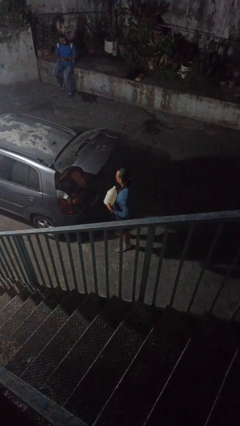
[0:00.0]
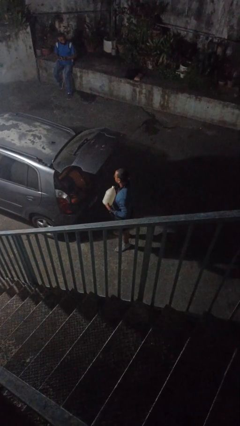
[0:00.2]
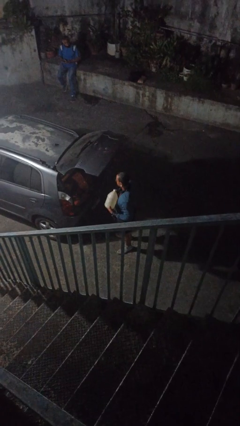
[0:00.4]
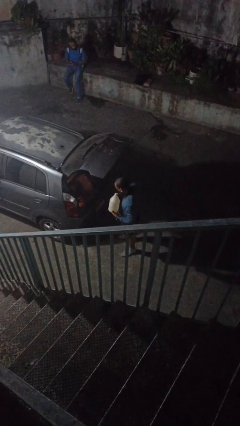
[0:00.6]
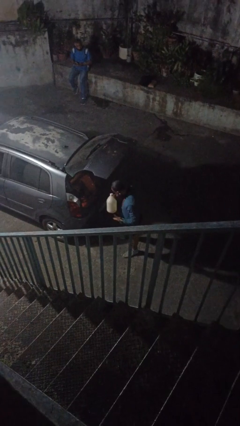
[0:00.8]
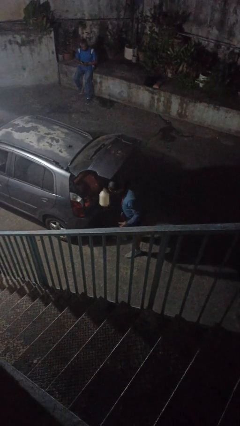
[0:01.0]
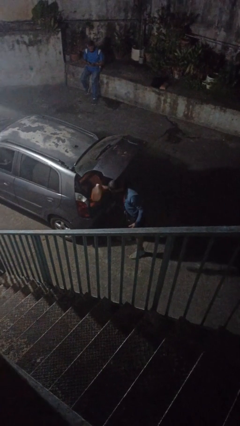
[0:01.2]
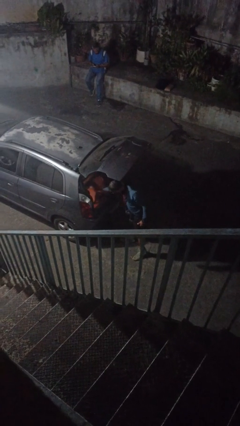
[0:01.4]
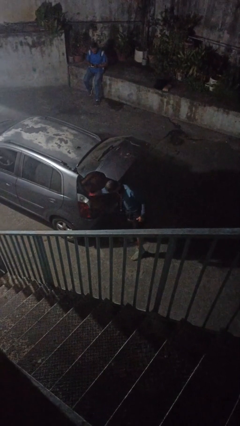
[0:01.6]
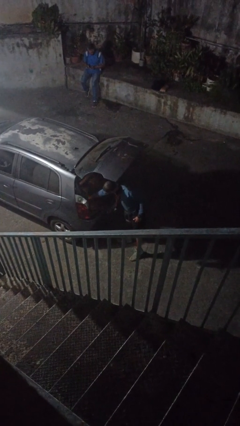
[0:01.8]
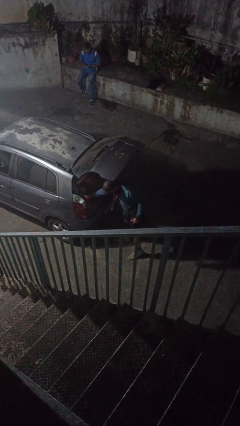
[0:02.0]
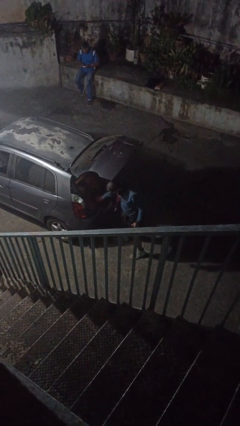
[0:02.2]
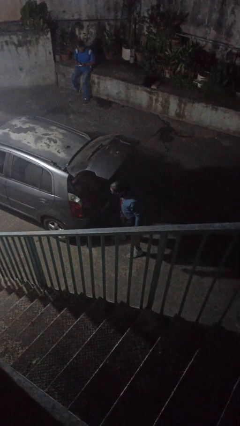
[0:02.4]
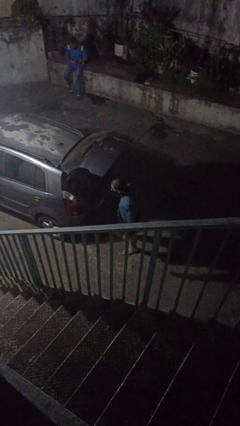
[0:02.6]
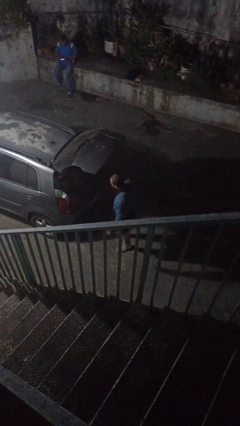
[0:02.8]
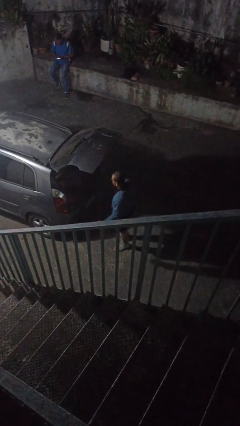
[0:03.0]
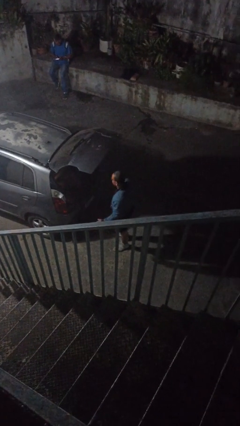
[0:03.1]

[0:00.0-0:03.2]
person loads car

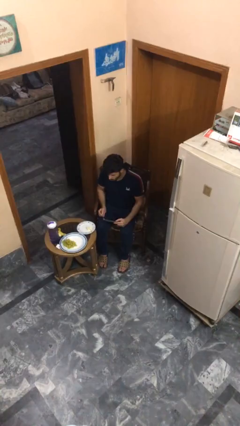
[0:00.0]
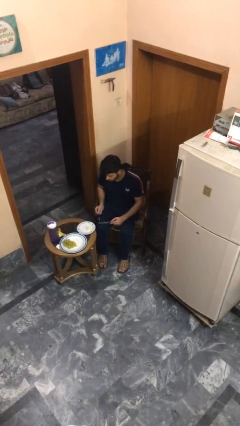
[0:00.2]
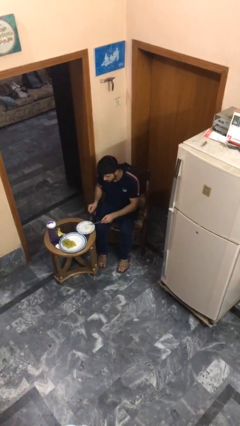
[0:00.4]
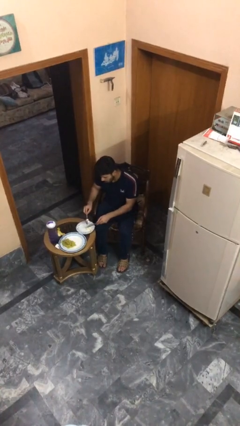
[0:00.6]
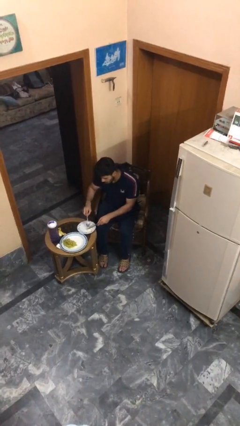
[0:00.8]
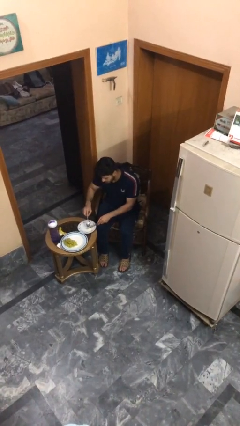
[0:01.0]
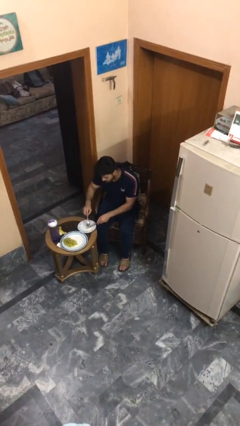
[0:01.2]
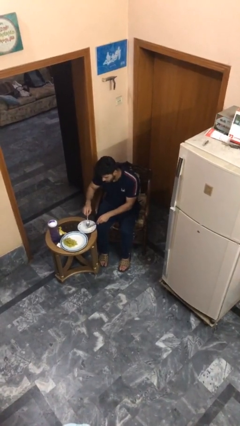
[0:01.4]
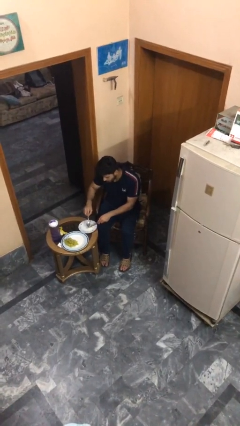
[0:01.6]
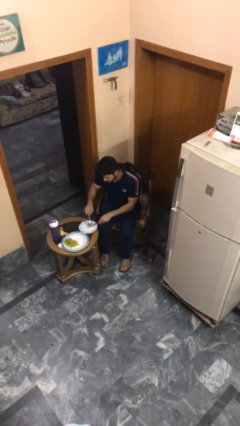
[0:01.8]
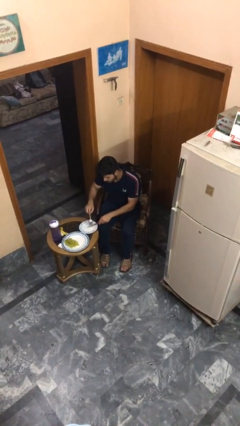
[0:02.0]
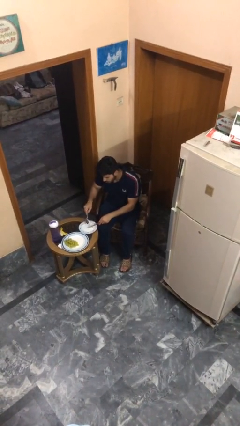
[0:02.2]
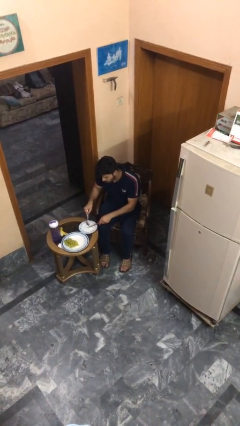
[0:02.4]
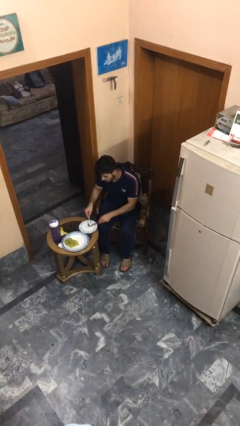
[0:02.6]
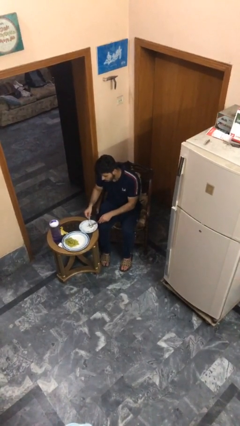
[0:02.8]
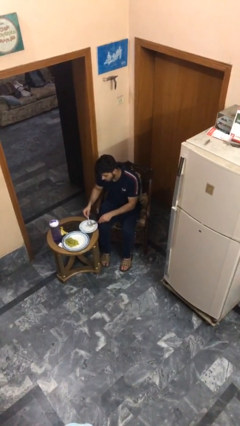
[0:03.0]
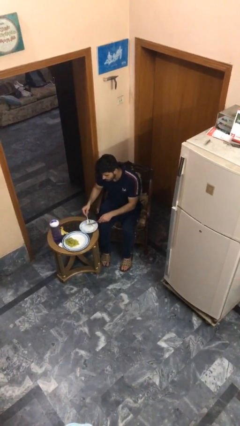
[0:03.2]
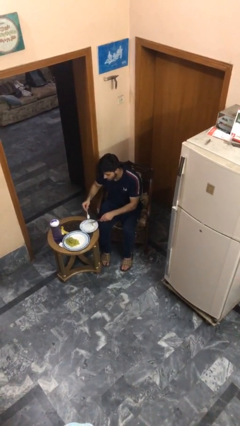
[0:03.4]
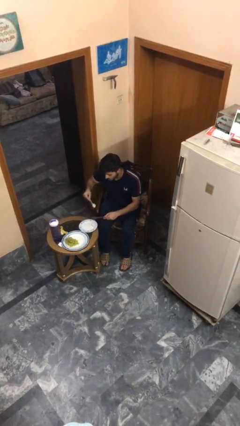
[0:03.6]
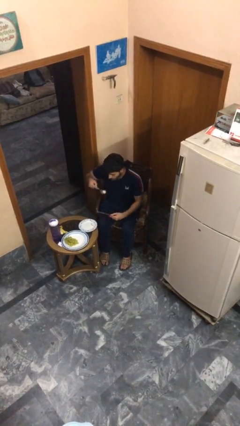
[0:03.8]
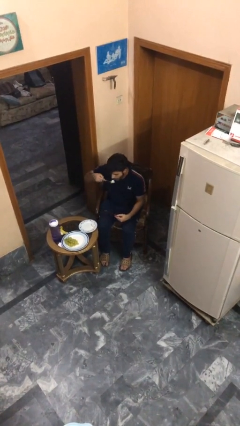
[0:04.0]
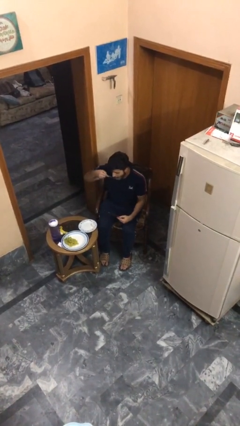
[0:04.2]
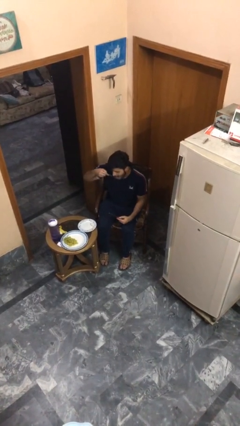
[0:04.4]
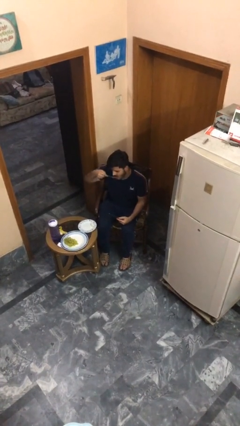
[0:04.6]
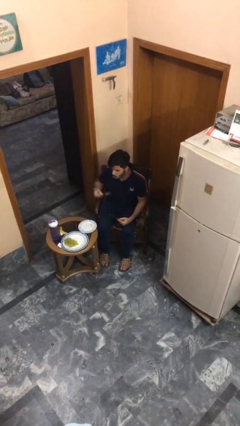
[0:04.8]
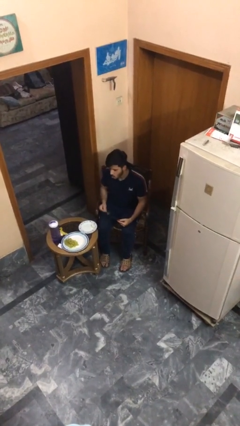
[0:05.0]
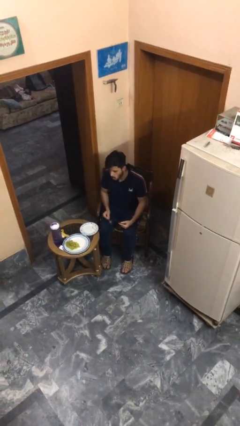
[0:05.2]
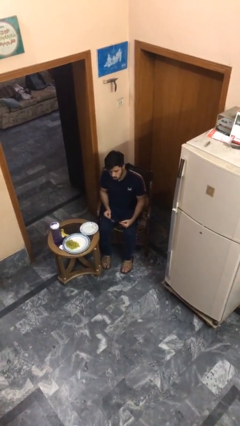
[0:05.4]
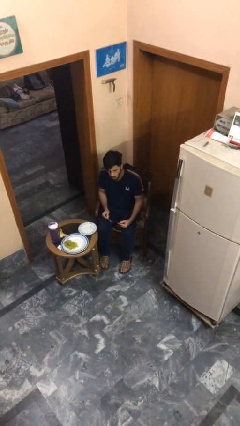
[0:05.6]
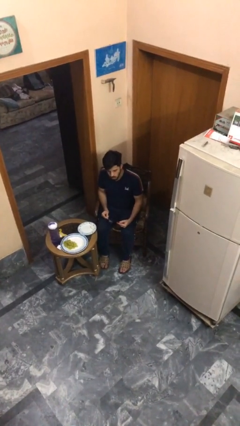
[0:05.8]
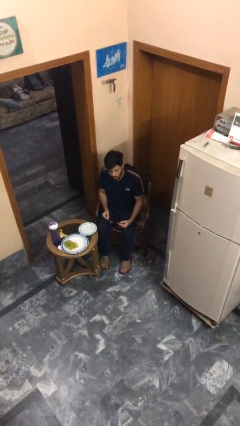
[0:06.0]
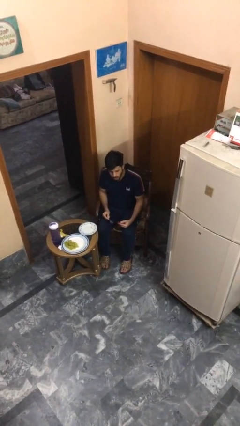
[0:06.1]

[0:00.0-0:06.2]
person eats with utensil

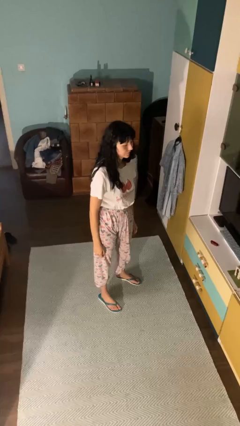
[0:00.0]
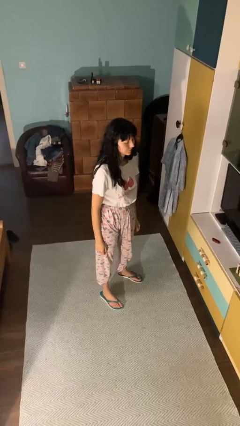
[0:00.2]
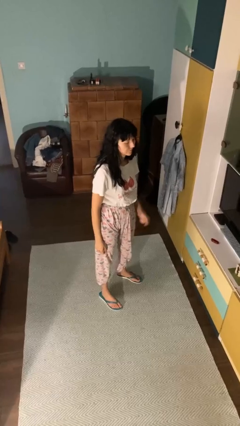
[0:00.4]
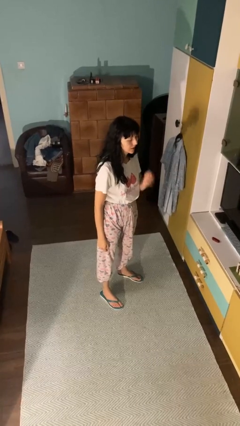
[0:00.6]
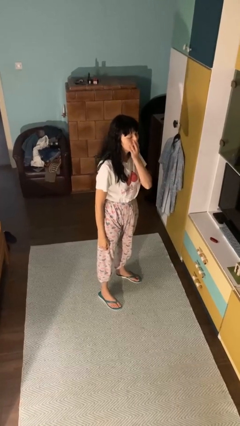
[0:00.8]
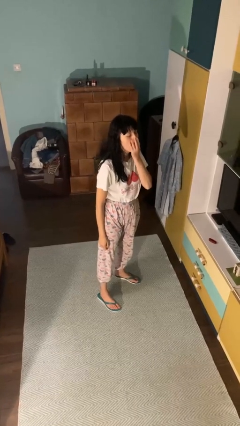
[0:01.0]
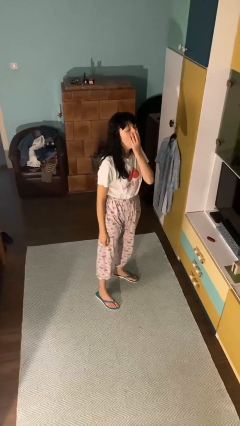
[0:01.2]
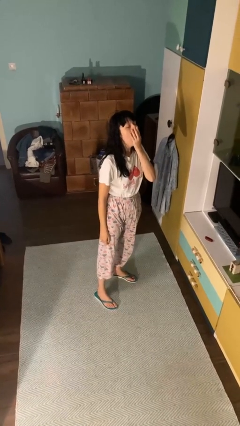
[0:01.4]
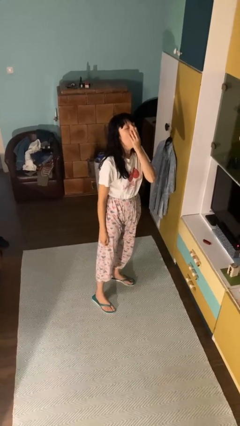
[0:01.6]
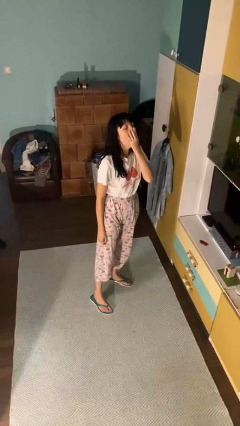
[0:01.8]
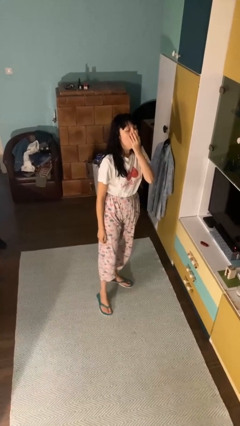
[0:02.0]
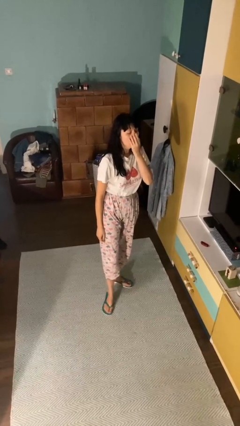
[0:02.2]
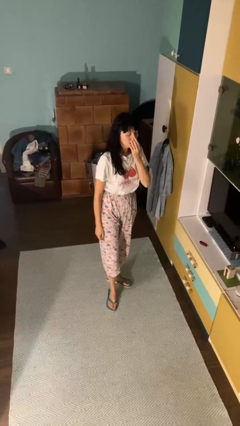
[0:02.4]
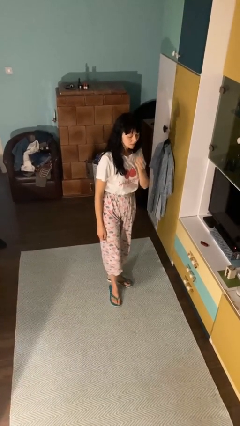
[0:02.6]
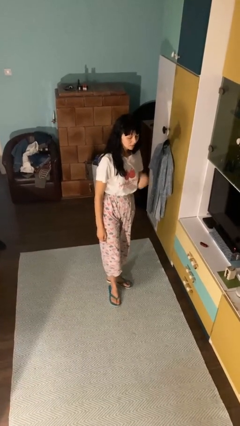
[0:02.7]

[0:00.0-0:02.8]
person yawns

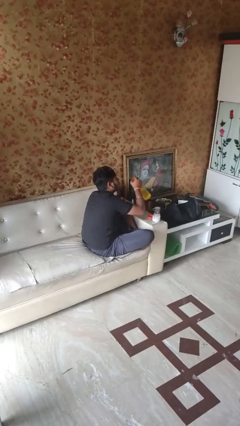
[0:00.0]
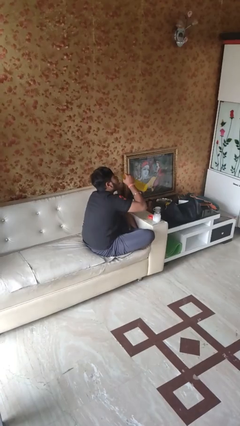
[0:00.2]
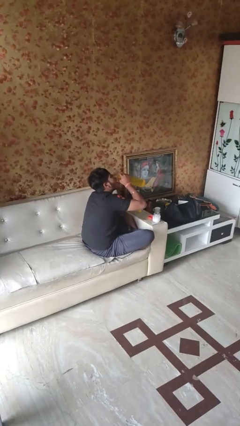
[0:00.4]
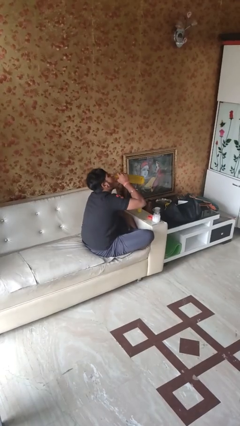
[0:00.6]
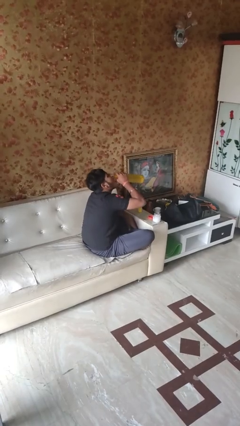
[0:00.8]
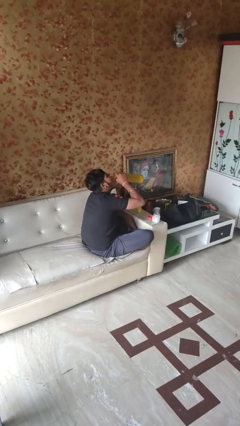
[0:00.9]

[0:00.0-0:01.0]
person drinks from cup

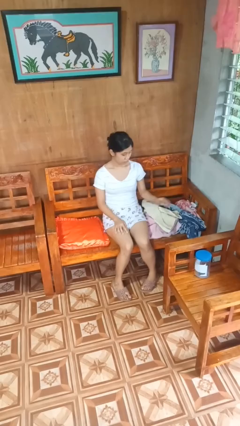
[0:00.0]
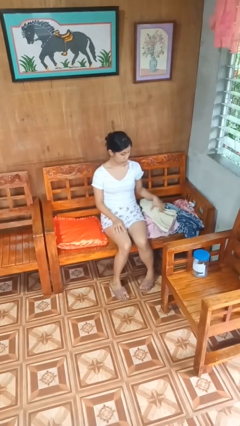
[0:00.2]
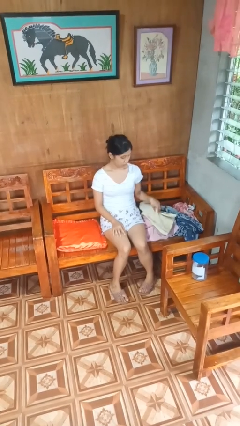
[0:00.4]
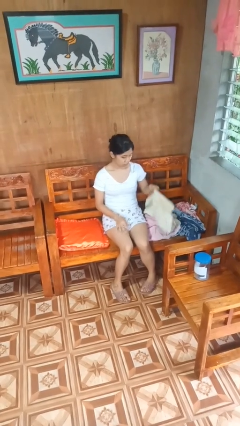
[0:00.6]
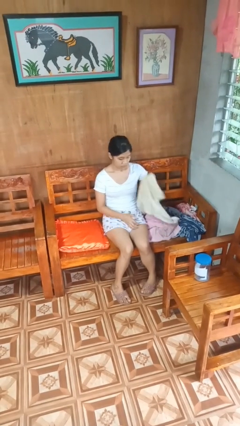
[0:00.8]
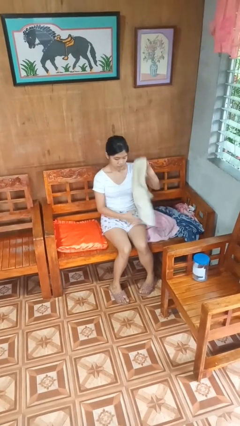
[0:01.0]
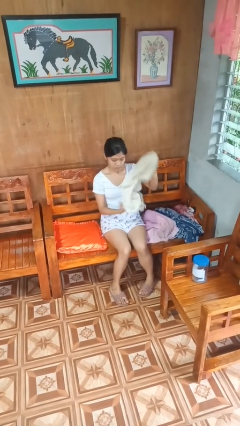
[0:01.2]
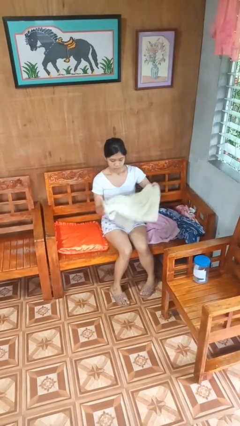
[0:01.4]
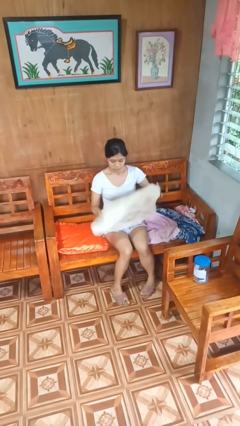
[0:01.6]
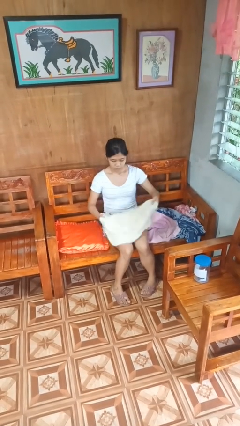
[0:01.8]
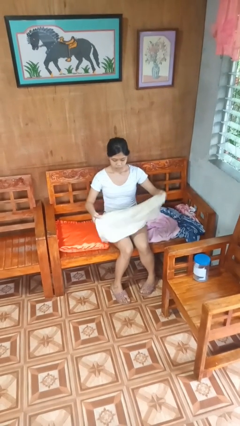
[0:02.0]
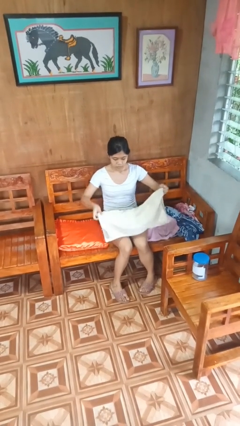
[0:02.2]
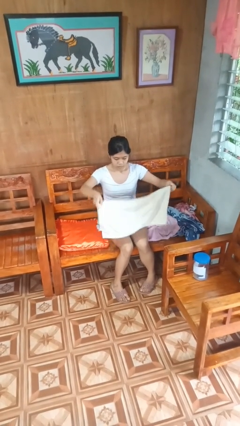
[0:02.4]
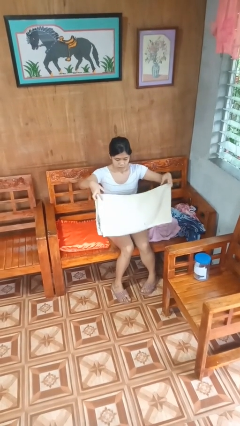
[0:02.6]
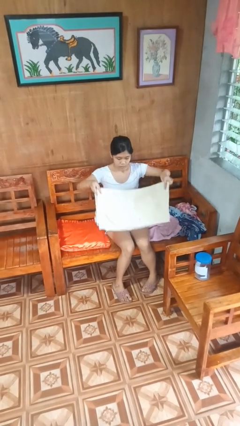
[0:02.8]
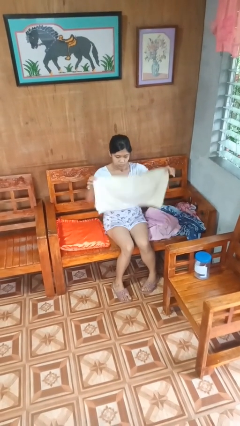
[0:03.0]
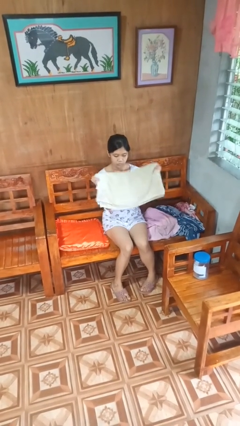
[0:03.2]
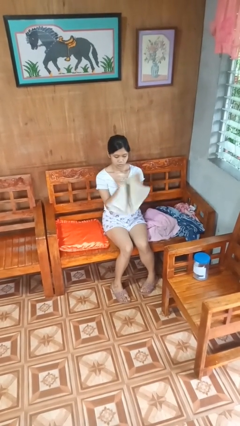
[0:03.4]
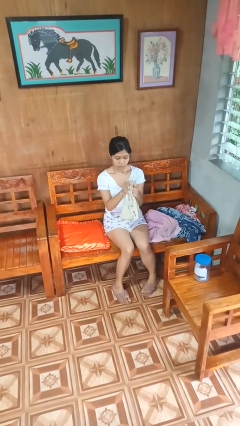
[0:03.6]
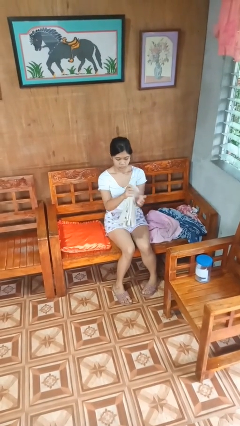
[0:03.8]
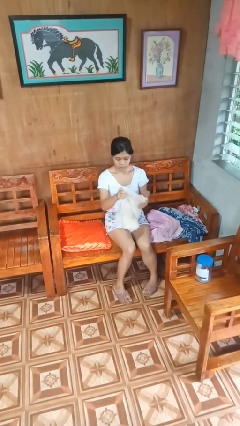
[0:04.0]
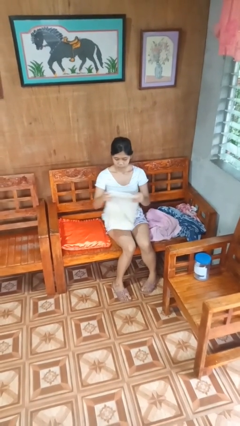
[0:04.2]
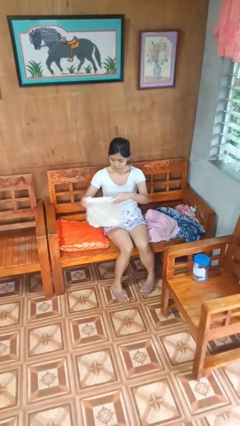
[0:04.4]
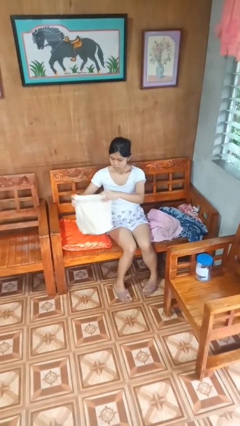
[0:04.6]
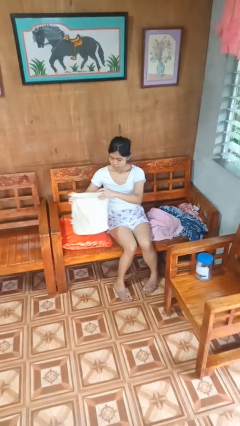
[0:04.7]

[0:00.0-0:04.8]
person folds towel
